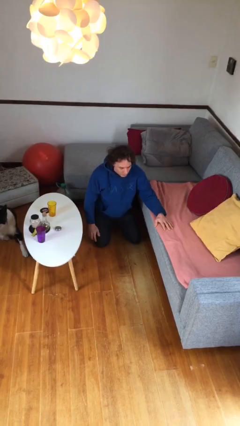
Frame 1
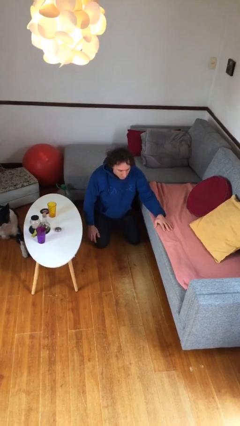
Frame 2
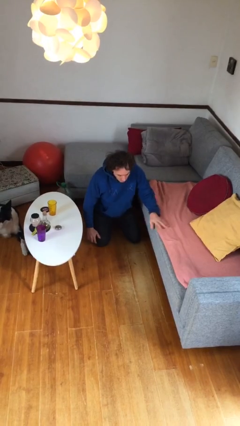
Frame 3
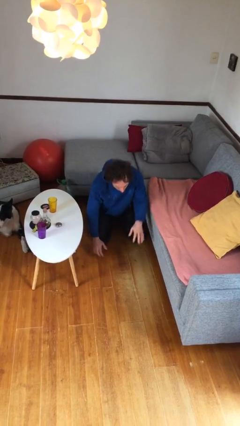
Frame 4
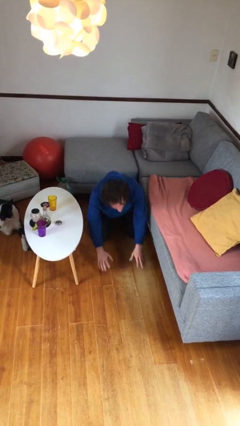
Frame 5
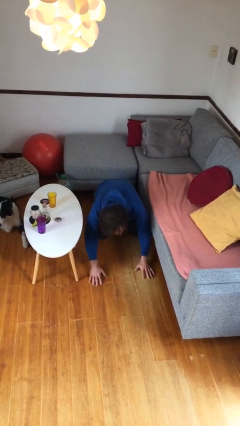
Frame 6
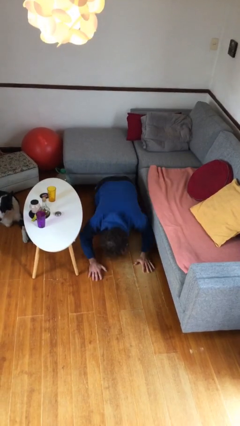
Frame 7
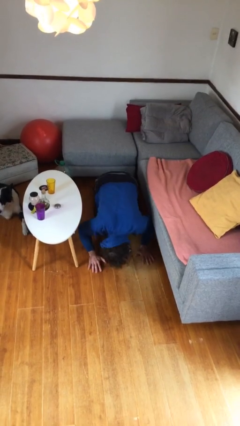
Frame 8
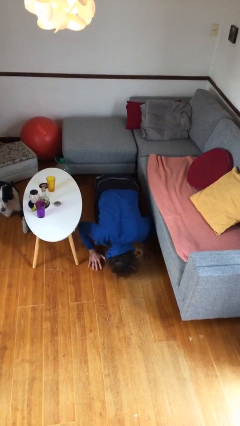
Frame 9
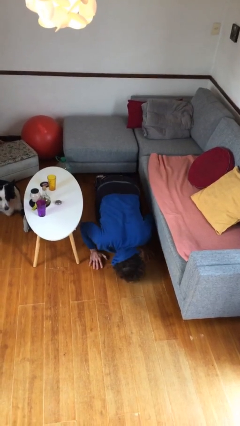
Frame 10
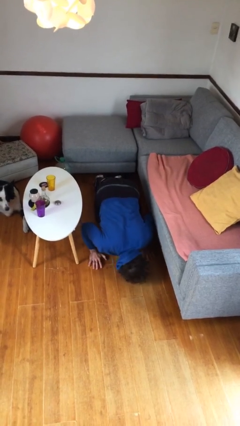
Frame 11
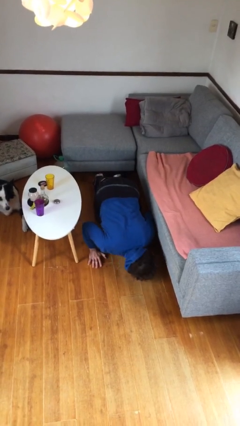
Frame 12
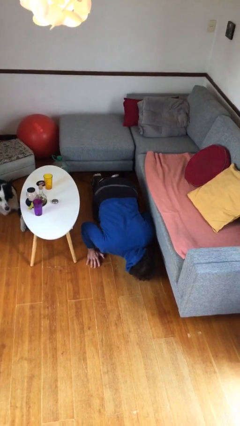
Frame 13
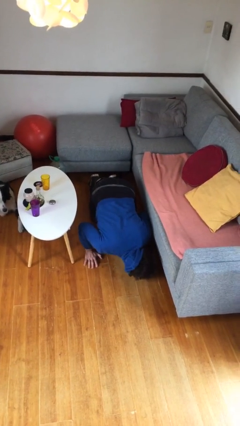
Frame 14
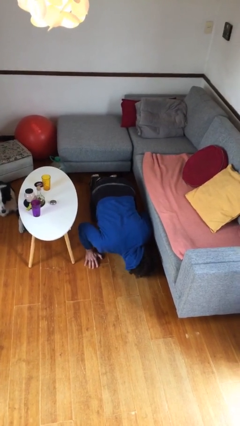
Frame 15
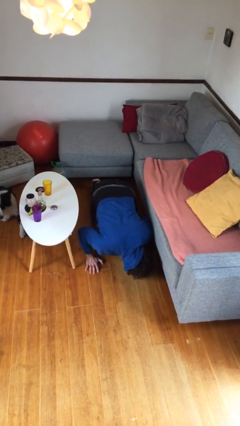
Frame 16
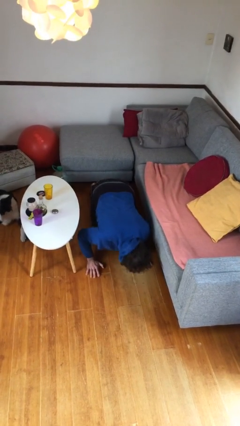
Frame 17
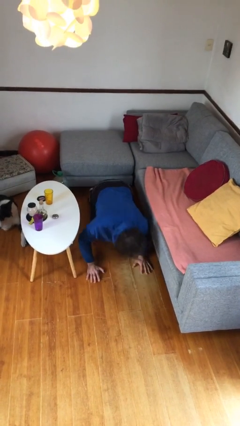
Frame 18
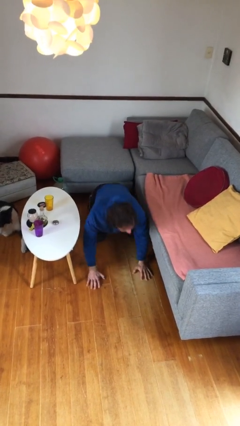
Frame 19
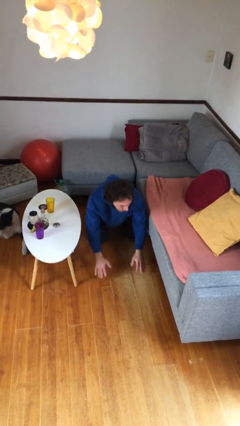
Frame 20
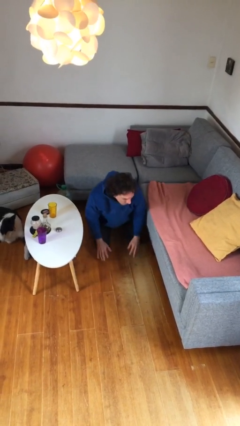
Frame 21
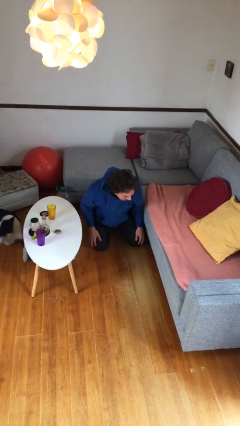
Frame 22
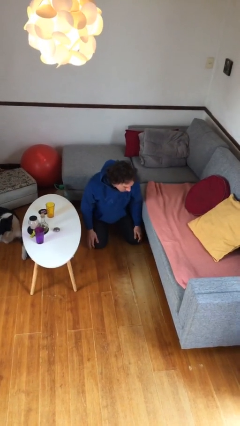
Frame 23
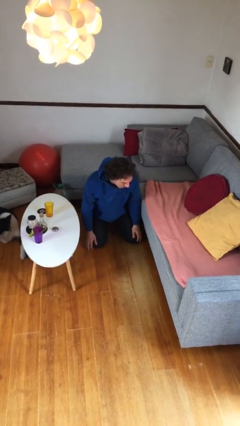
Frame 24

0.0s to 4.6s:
person searches under couch

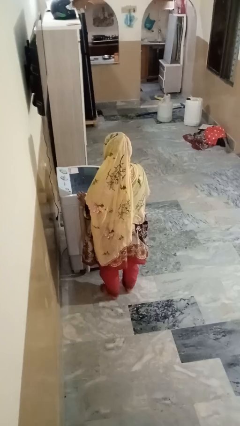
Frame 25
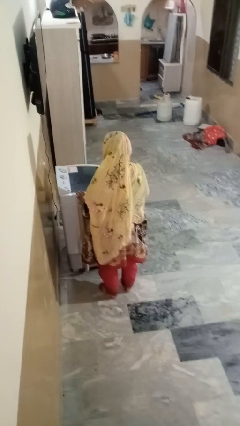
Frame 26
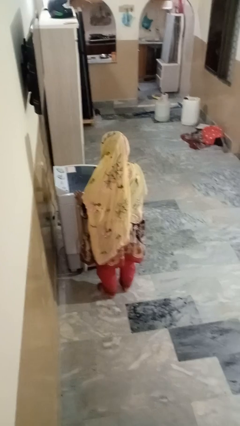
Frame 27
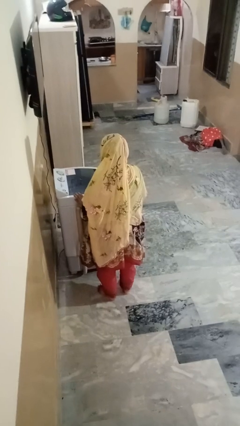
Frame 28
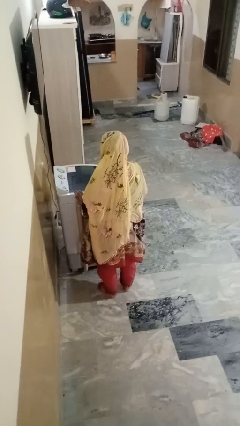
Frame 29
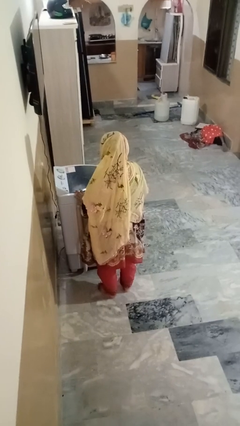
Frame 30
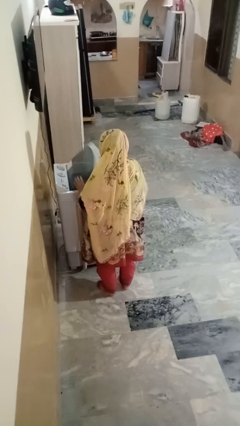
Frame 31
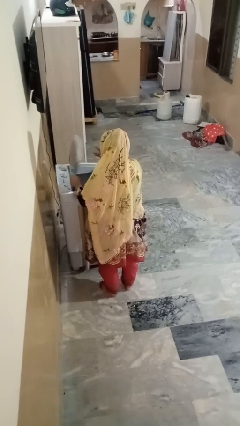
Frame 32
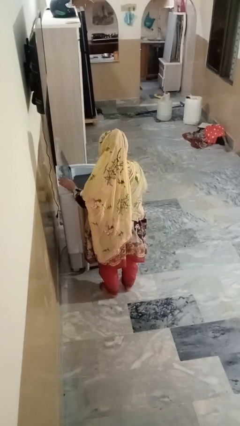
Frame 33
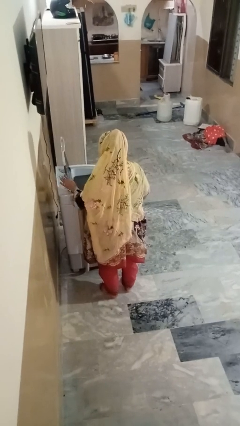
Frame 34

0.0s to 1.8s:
person opens clothes washer

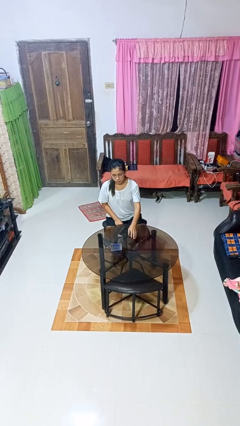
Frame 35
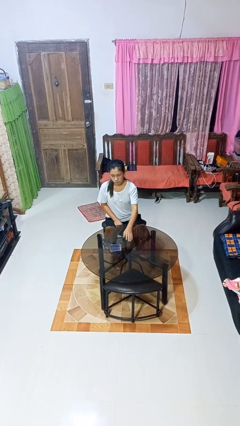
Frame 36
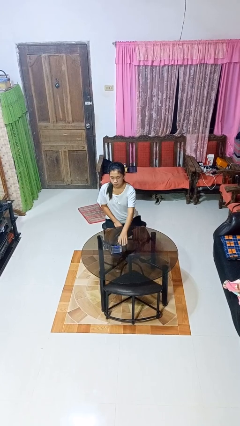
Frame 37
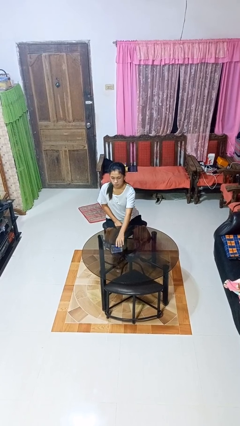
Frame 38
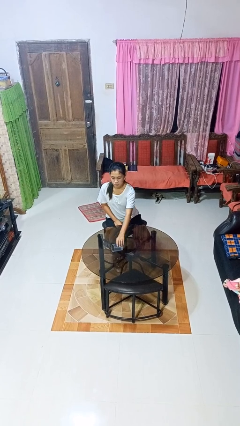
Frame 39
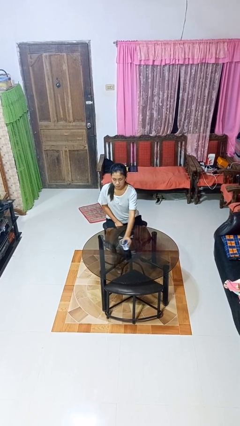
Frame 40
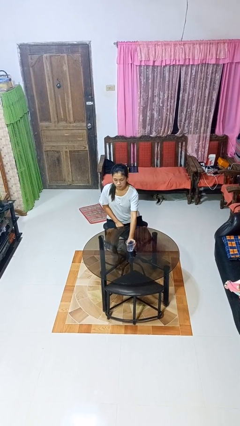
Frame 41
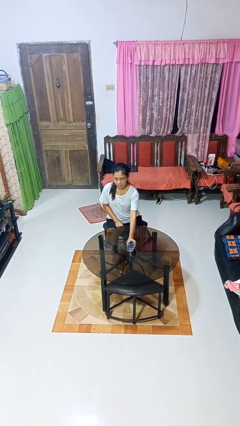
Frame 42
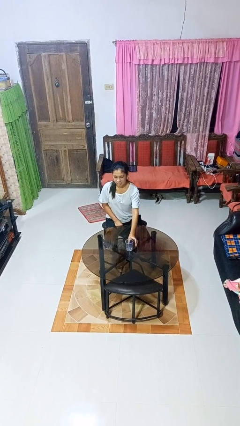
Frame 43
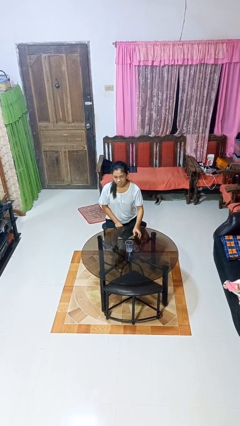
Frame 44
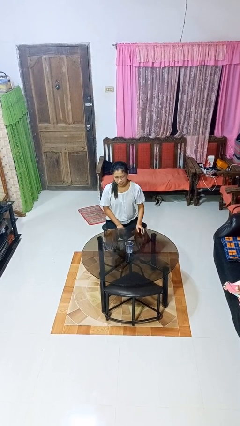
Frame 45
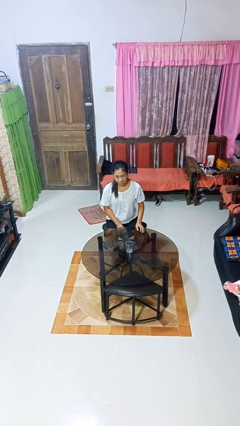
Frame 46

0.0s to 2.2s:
person sets upright glass

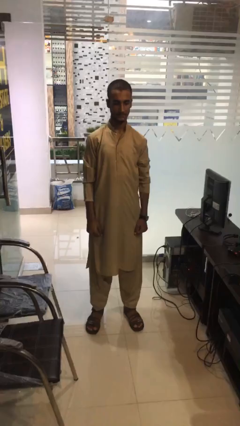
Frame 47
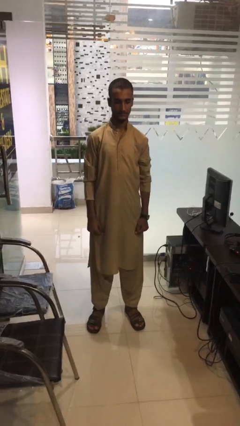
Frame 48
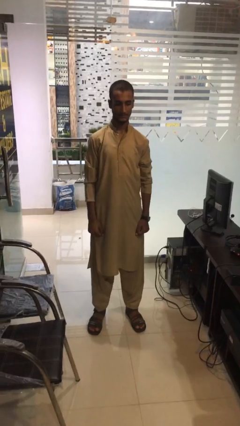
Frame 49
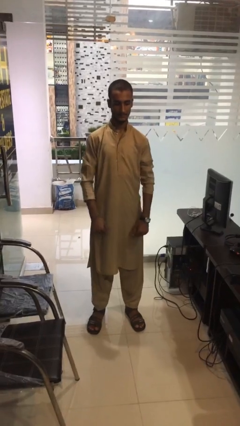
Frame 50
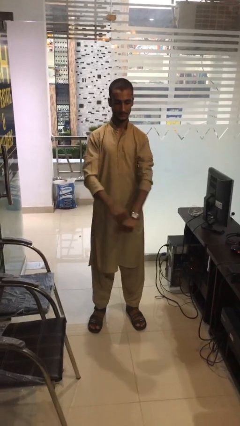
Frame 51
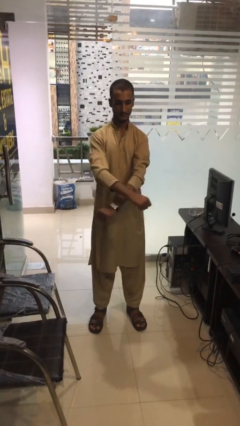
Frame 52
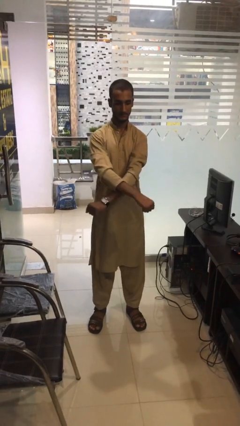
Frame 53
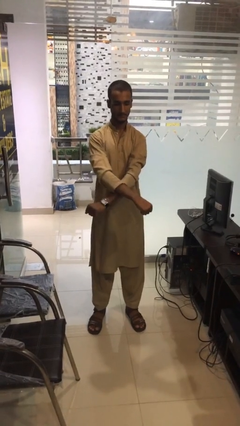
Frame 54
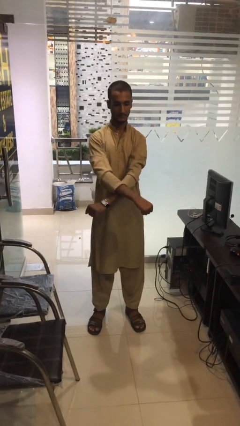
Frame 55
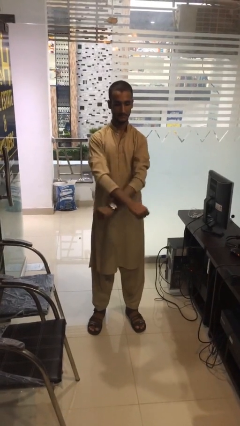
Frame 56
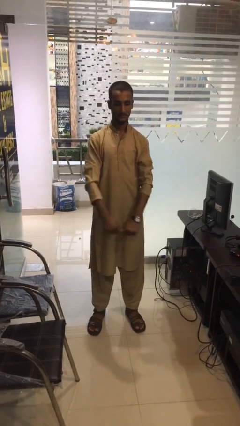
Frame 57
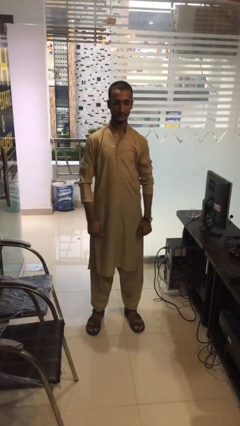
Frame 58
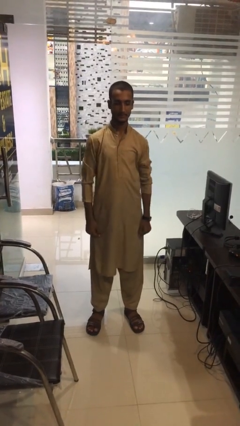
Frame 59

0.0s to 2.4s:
person gestures arms x

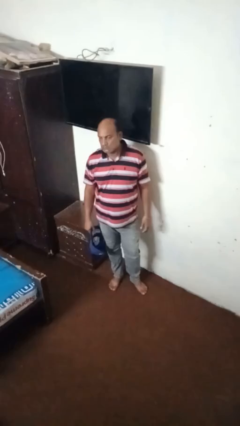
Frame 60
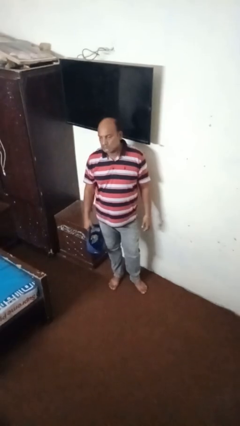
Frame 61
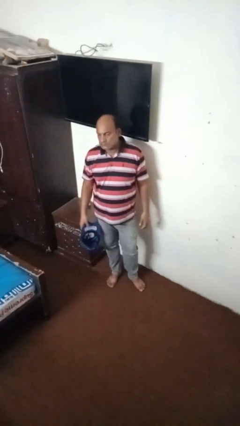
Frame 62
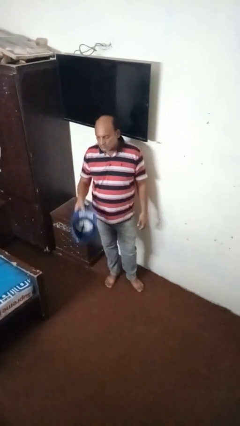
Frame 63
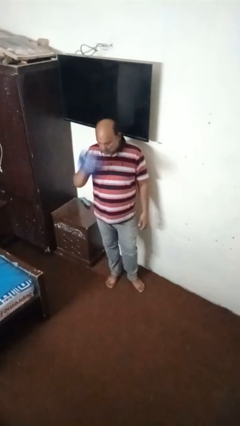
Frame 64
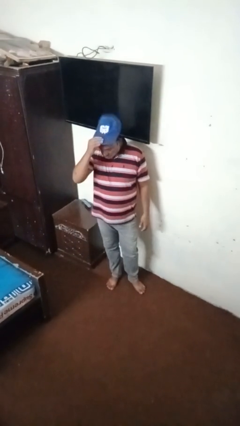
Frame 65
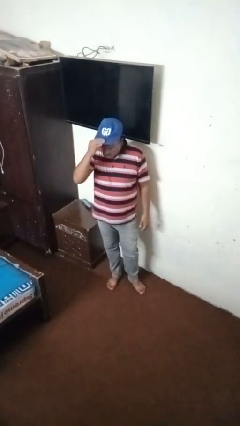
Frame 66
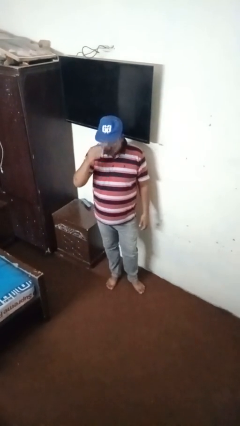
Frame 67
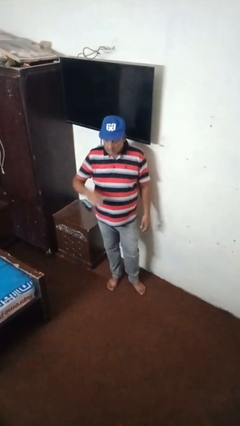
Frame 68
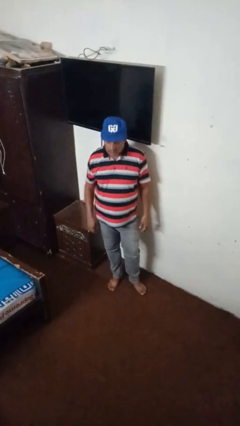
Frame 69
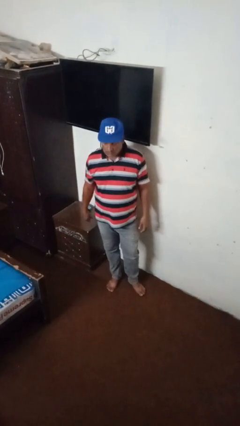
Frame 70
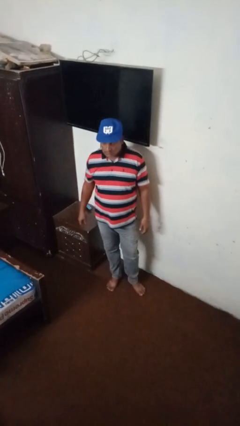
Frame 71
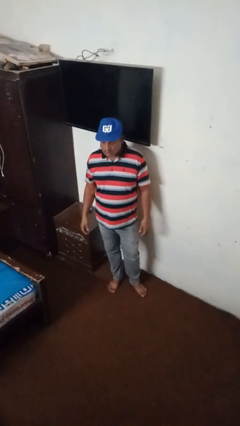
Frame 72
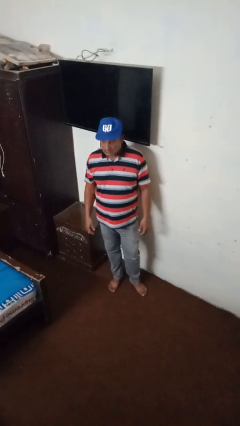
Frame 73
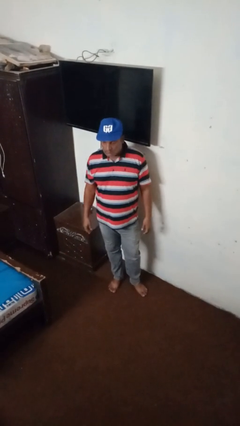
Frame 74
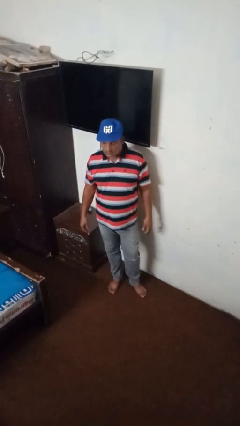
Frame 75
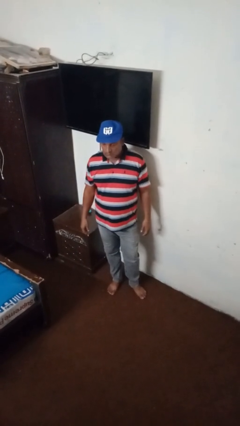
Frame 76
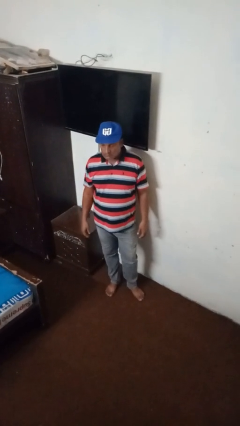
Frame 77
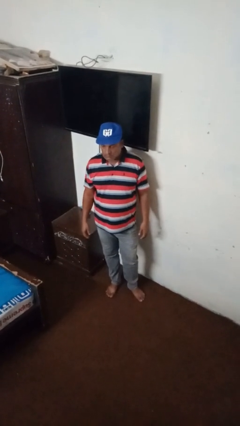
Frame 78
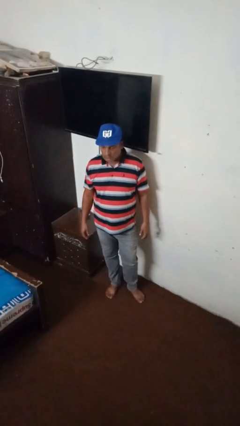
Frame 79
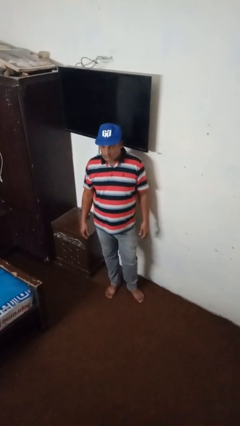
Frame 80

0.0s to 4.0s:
person puts on hat

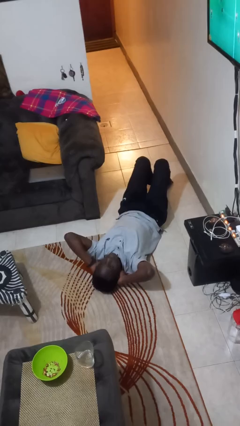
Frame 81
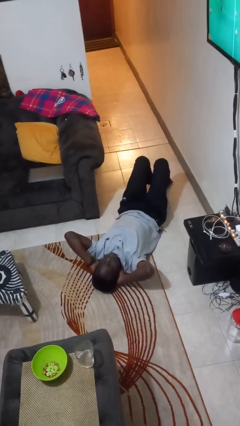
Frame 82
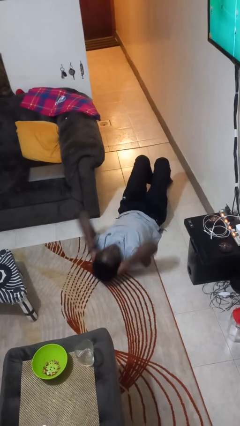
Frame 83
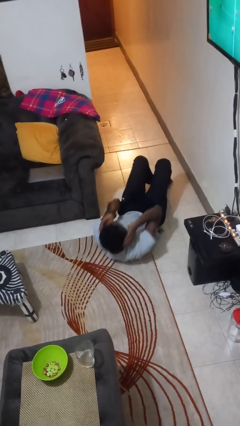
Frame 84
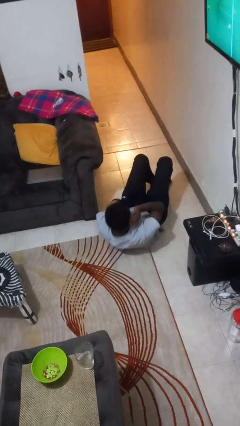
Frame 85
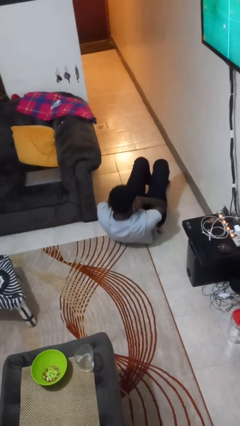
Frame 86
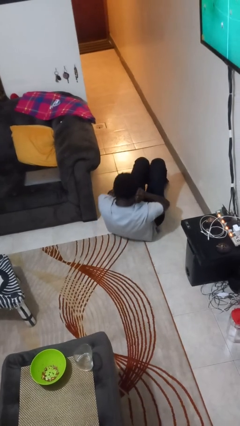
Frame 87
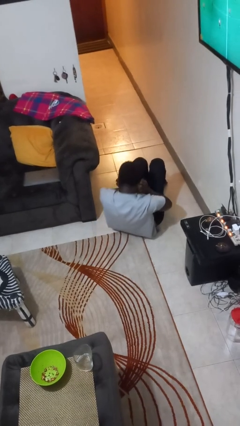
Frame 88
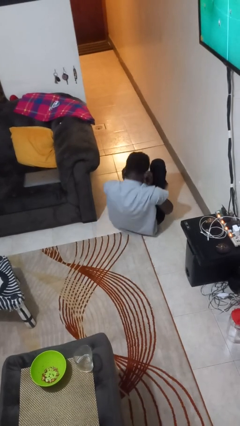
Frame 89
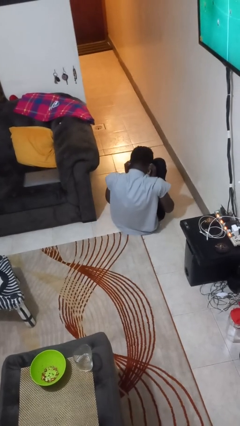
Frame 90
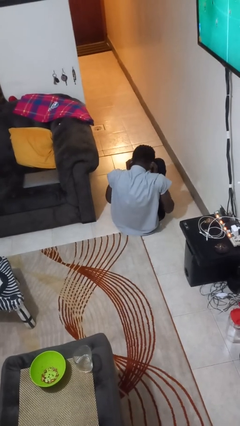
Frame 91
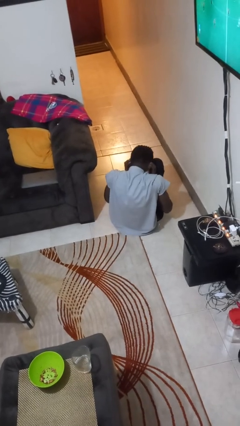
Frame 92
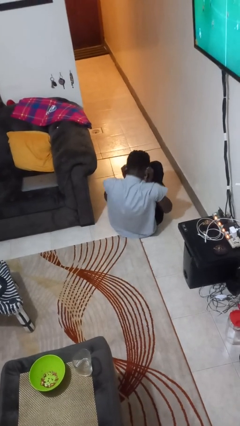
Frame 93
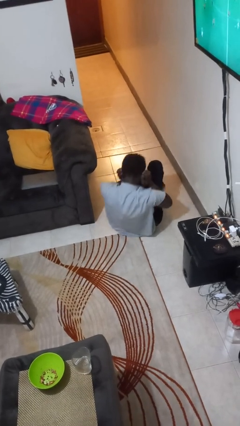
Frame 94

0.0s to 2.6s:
person exercises with situp
